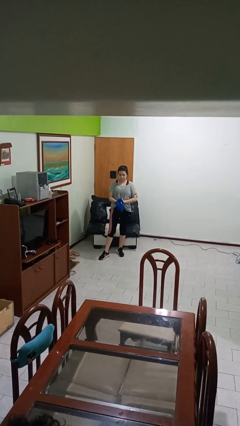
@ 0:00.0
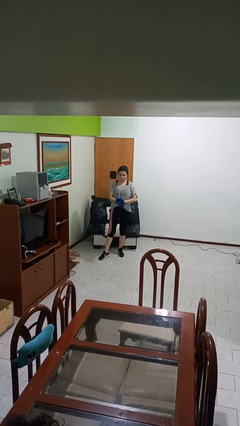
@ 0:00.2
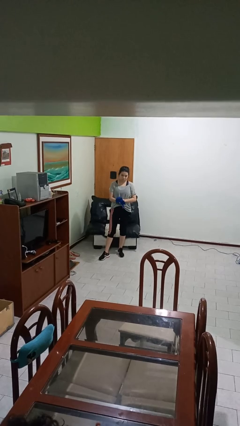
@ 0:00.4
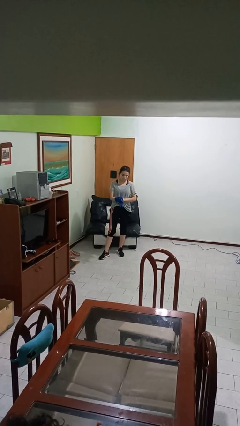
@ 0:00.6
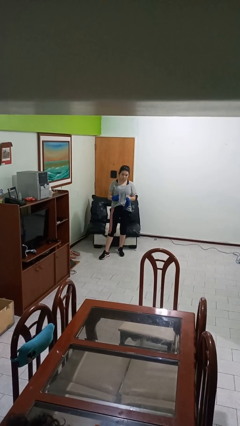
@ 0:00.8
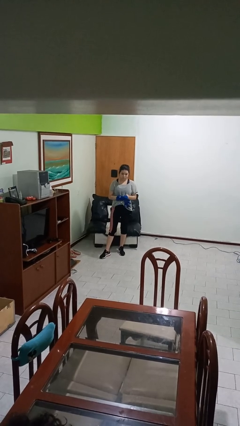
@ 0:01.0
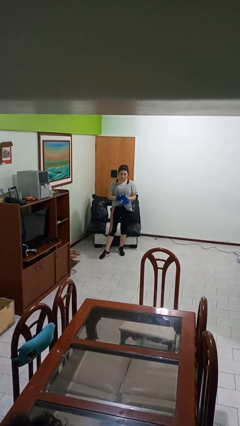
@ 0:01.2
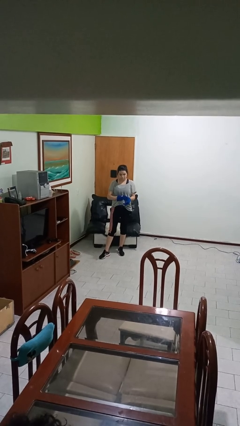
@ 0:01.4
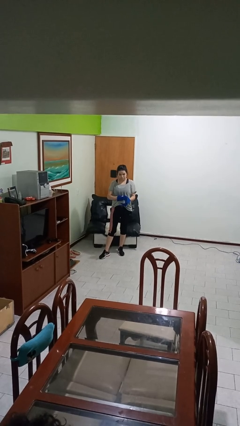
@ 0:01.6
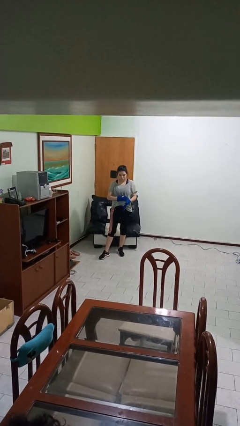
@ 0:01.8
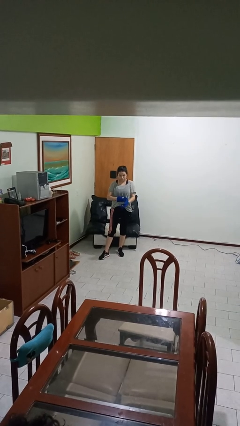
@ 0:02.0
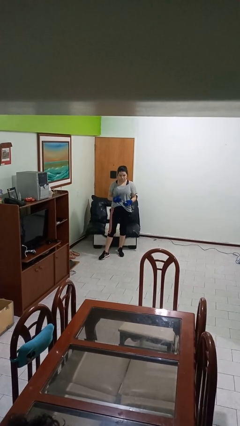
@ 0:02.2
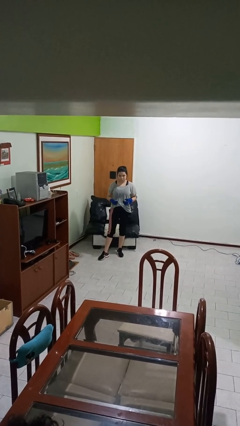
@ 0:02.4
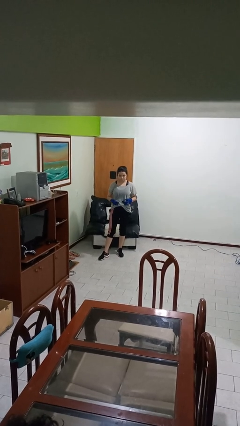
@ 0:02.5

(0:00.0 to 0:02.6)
person puts on gloves

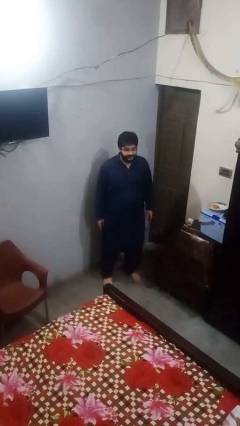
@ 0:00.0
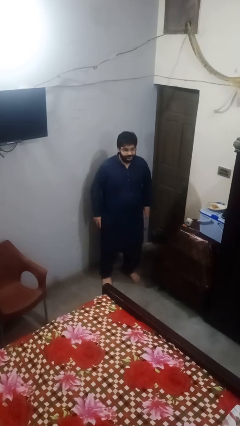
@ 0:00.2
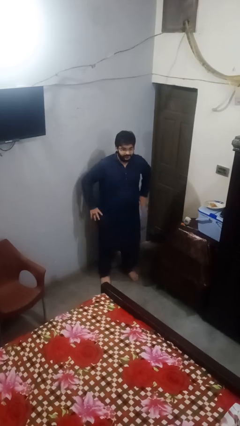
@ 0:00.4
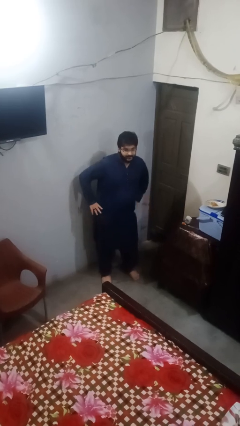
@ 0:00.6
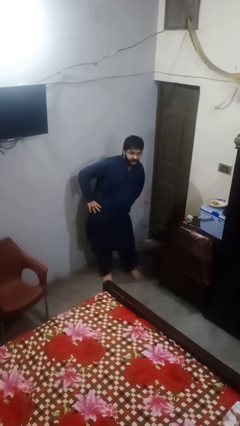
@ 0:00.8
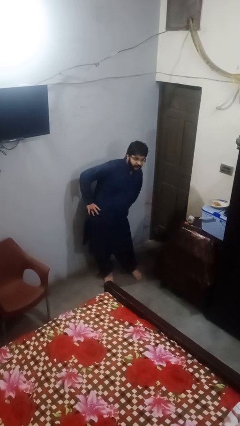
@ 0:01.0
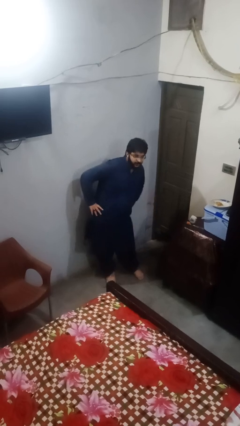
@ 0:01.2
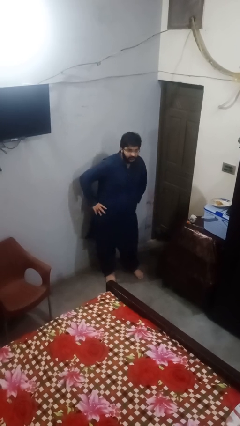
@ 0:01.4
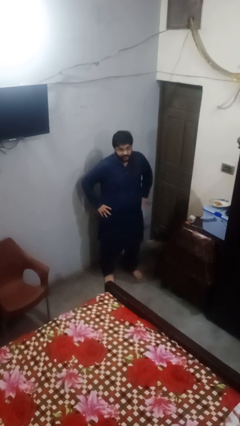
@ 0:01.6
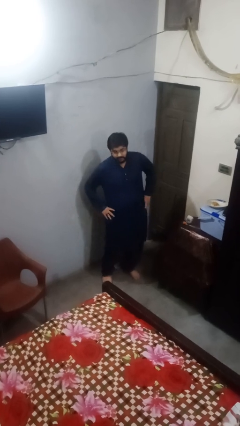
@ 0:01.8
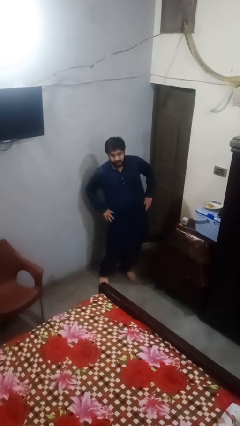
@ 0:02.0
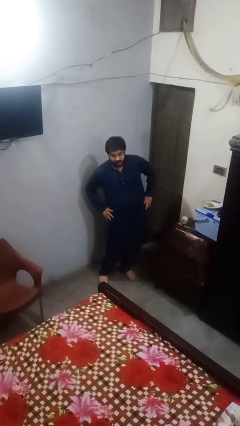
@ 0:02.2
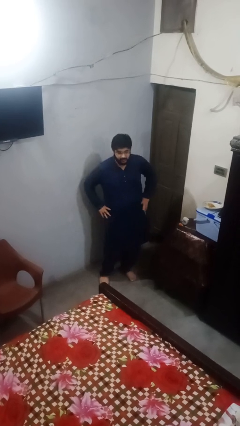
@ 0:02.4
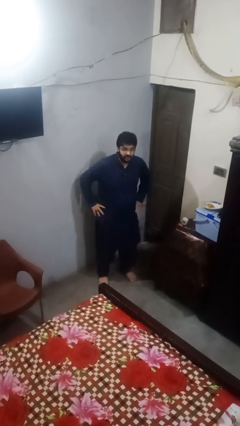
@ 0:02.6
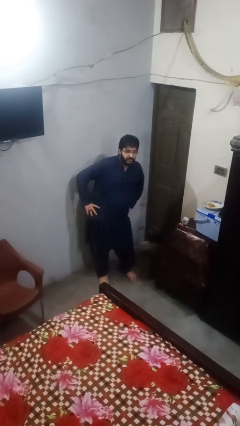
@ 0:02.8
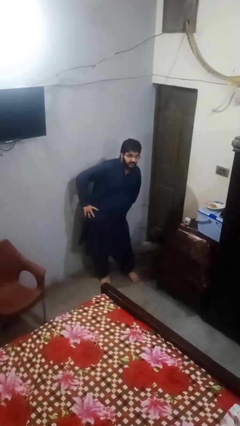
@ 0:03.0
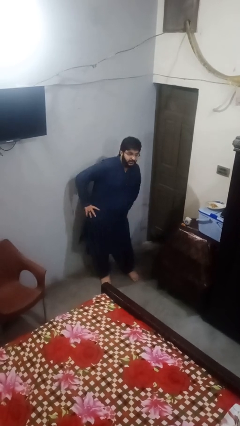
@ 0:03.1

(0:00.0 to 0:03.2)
person wiggles hips

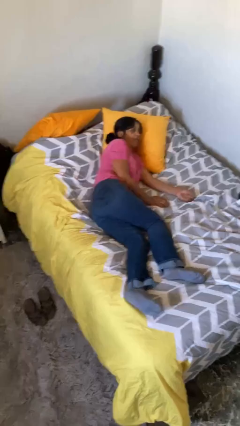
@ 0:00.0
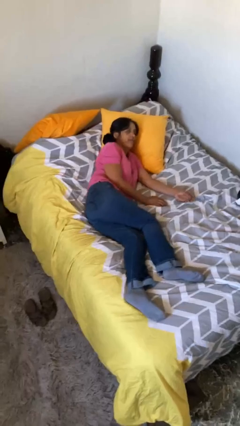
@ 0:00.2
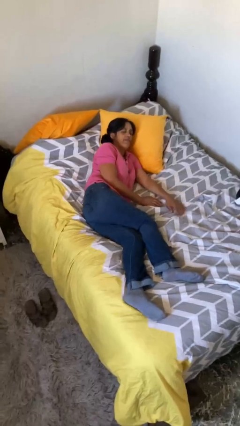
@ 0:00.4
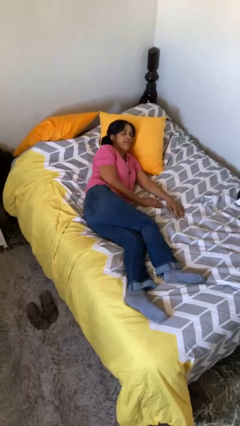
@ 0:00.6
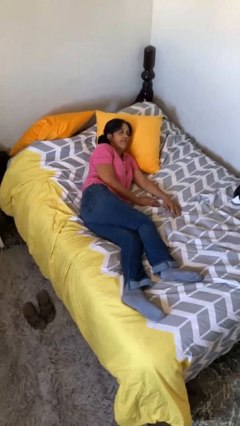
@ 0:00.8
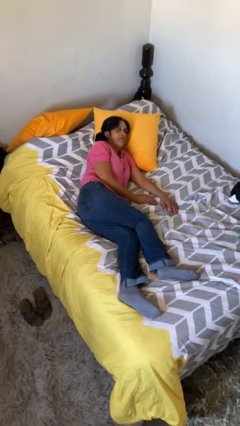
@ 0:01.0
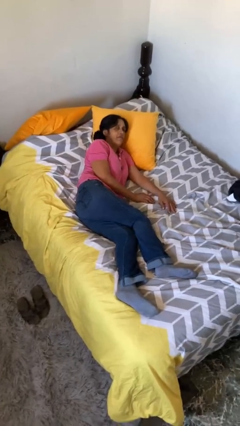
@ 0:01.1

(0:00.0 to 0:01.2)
person lies down on bed

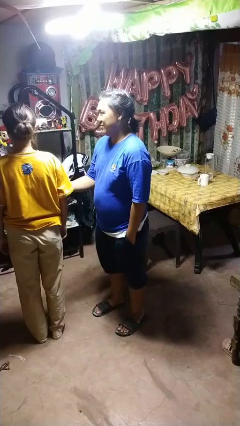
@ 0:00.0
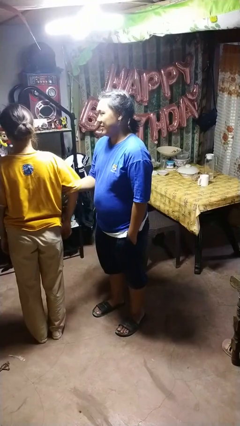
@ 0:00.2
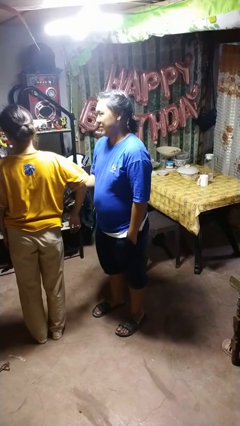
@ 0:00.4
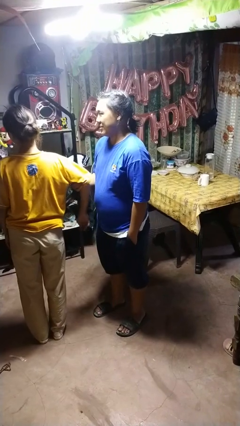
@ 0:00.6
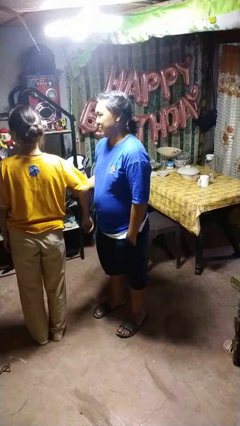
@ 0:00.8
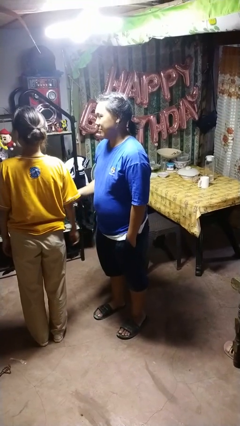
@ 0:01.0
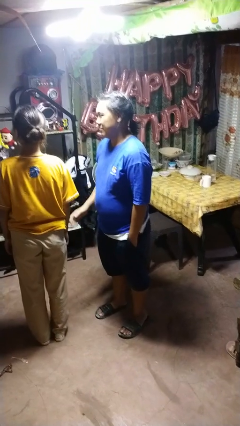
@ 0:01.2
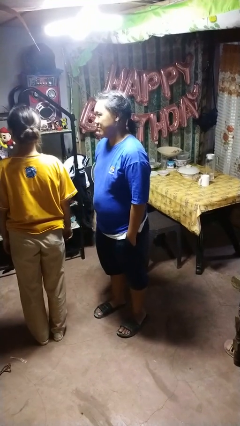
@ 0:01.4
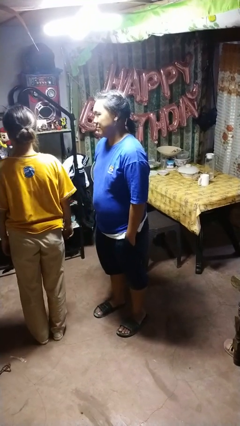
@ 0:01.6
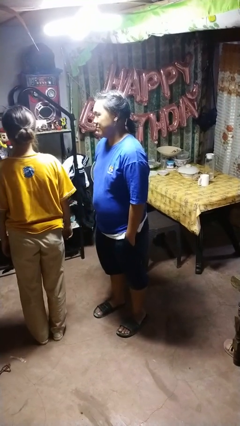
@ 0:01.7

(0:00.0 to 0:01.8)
person grabs person by bicep

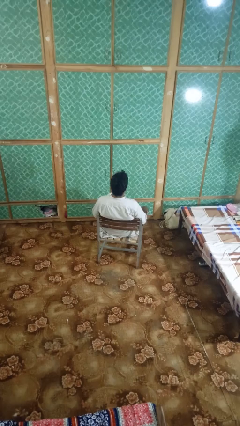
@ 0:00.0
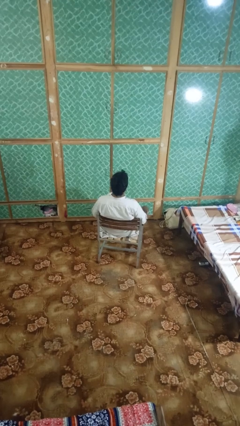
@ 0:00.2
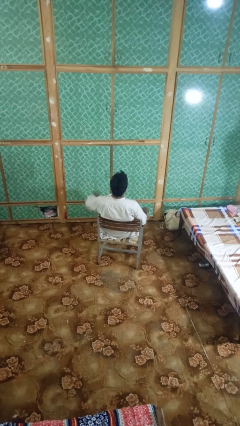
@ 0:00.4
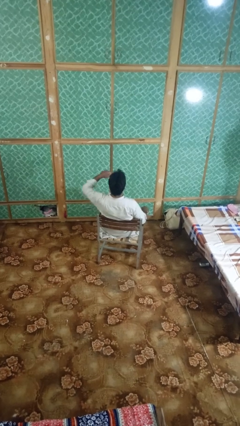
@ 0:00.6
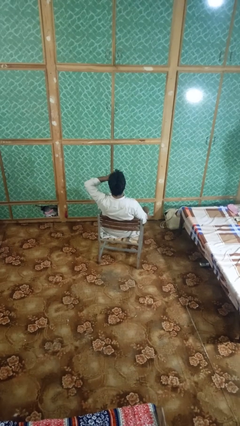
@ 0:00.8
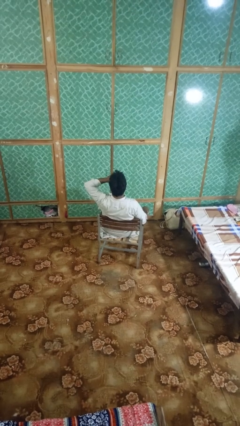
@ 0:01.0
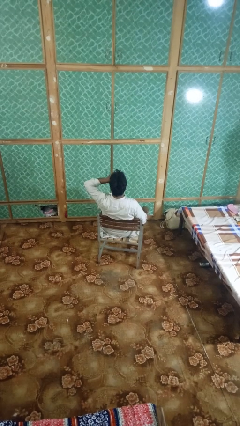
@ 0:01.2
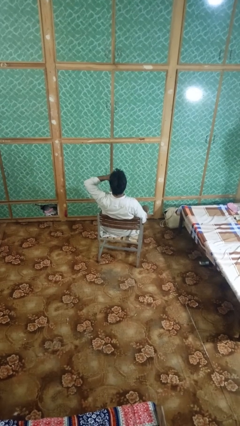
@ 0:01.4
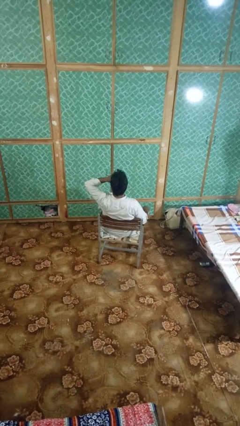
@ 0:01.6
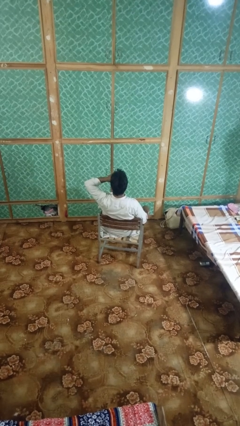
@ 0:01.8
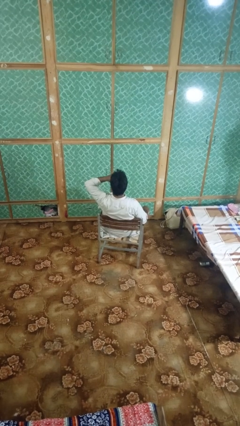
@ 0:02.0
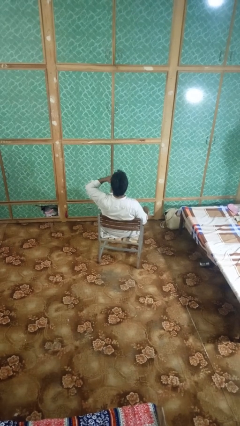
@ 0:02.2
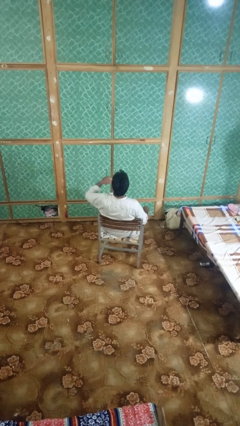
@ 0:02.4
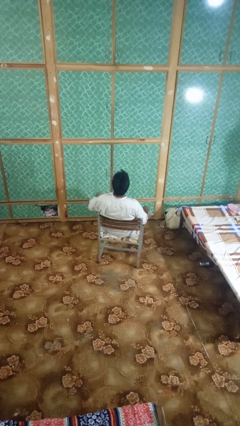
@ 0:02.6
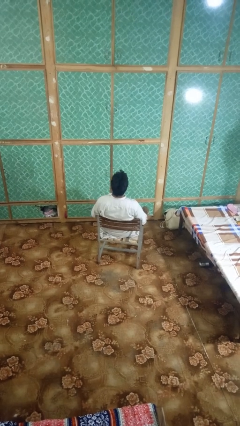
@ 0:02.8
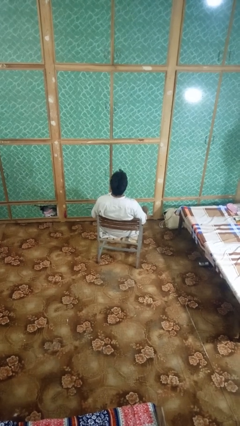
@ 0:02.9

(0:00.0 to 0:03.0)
person rubs eyes

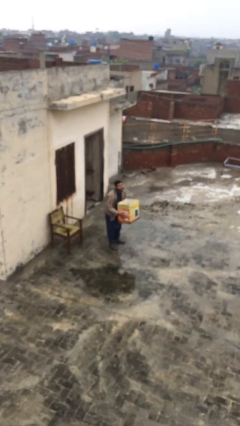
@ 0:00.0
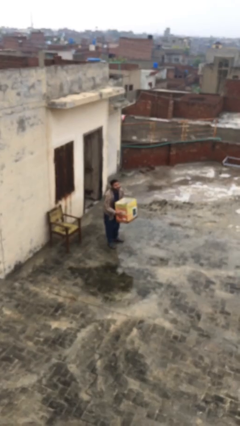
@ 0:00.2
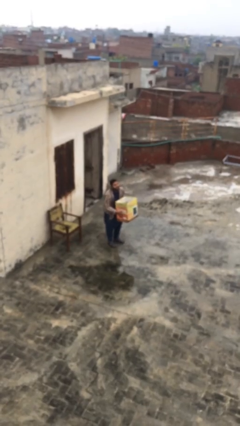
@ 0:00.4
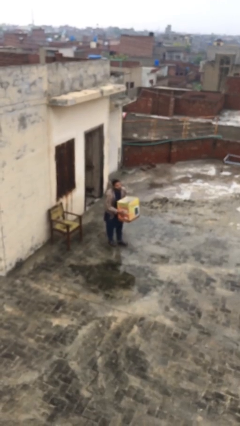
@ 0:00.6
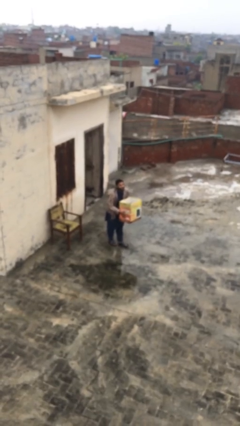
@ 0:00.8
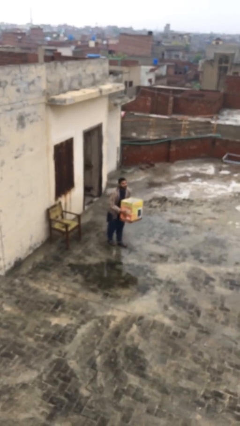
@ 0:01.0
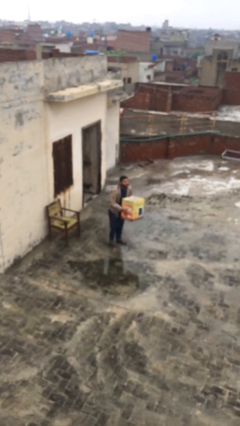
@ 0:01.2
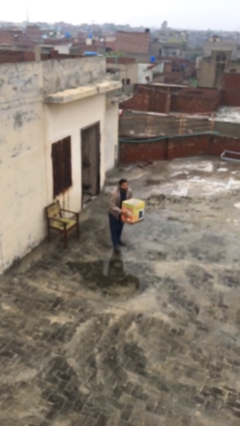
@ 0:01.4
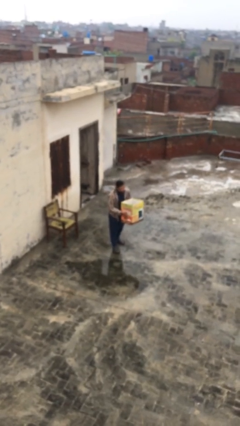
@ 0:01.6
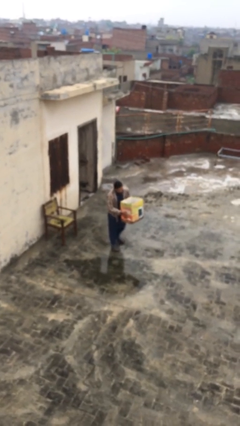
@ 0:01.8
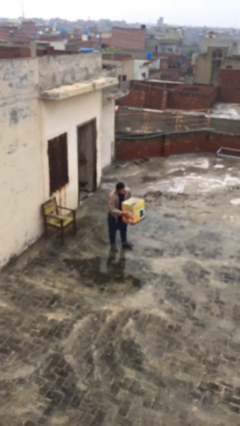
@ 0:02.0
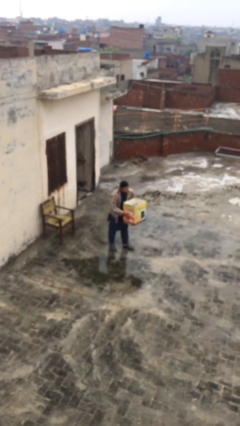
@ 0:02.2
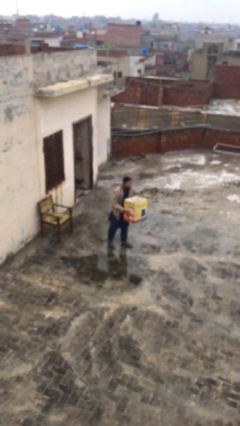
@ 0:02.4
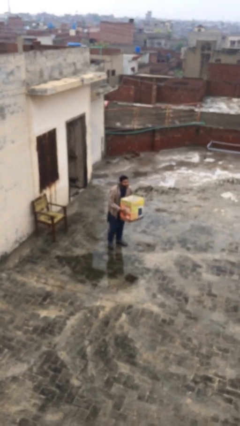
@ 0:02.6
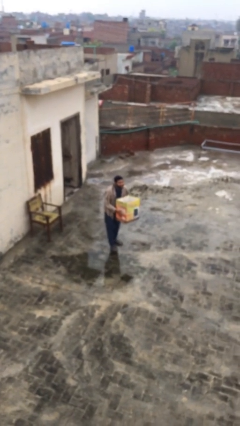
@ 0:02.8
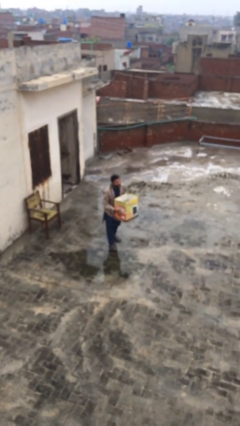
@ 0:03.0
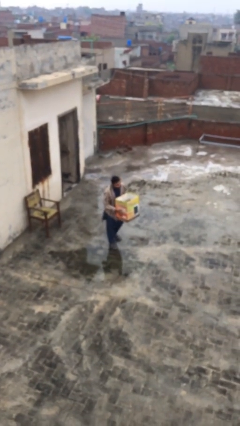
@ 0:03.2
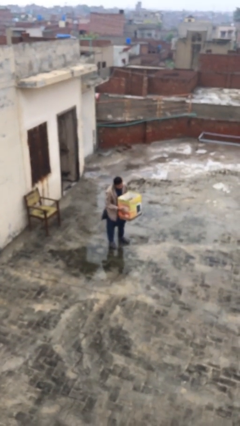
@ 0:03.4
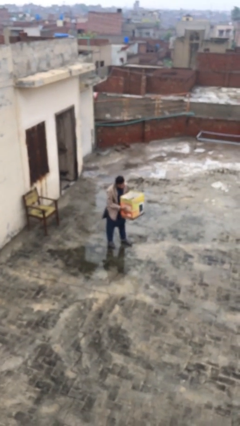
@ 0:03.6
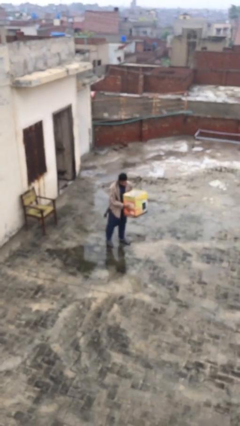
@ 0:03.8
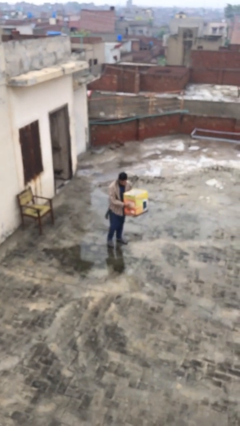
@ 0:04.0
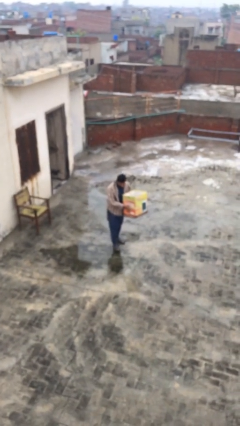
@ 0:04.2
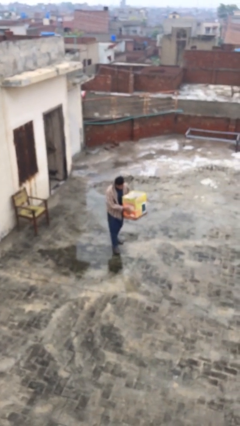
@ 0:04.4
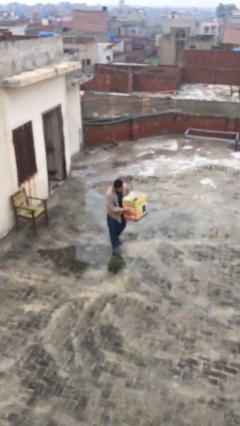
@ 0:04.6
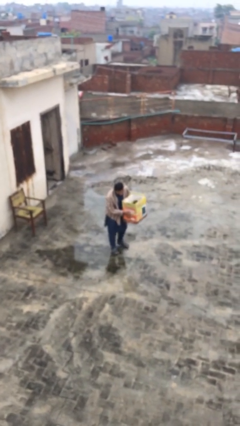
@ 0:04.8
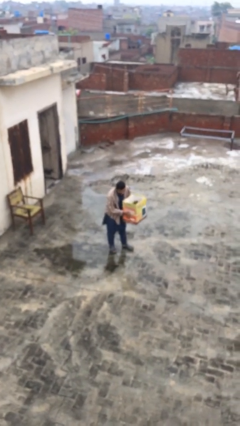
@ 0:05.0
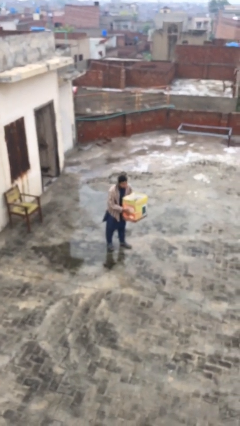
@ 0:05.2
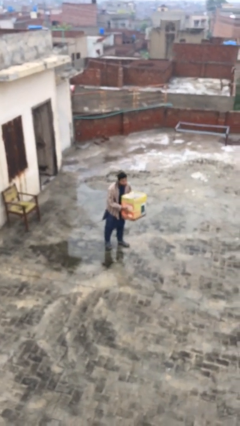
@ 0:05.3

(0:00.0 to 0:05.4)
person carries heavy object

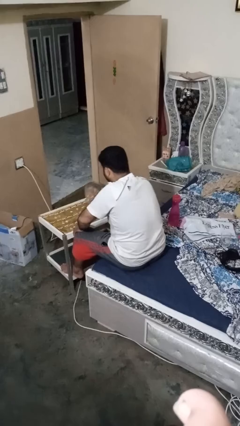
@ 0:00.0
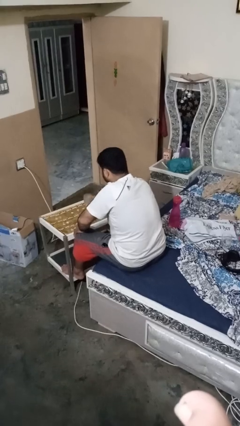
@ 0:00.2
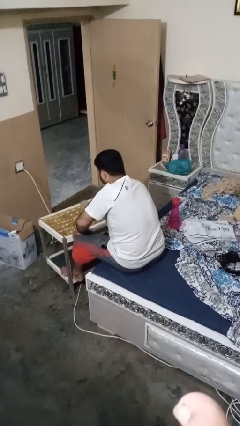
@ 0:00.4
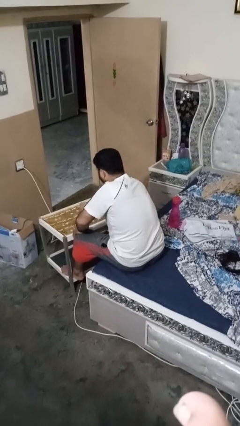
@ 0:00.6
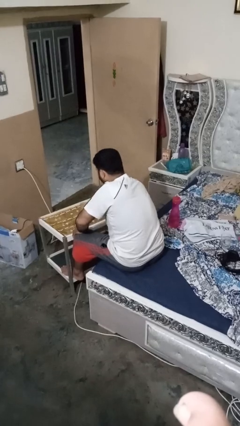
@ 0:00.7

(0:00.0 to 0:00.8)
person puts down object on table
